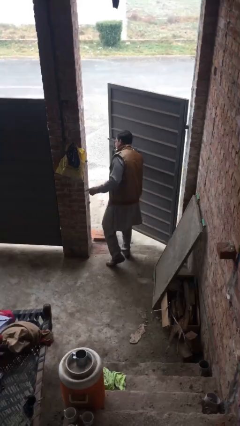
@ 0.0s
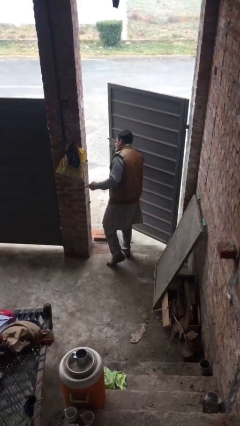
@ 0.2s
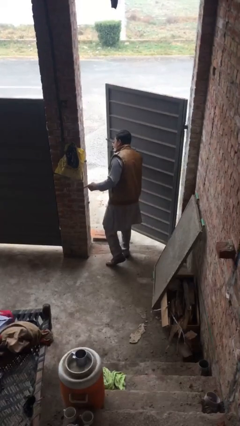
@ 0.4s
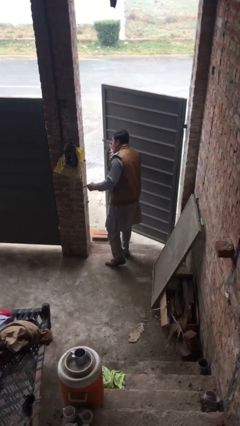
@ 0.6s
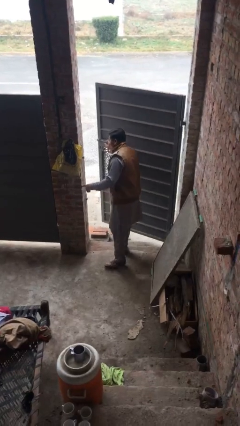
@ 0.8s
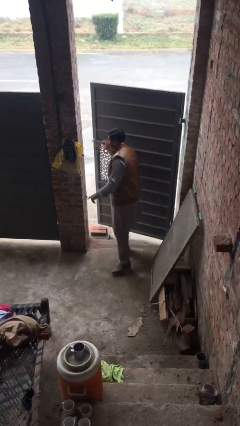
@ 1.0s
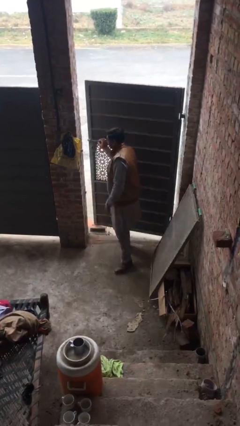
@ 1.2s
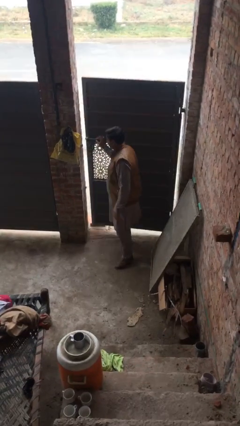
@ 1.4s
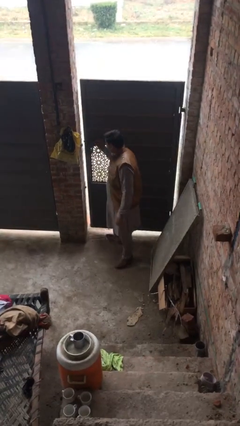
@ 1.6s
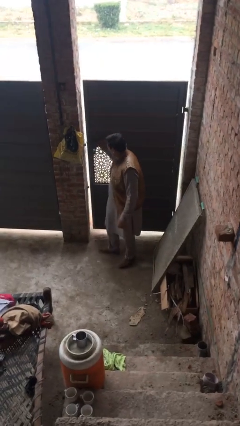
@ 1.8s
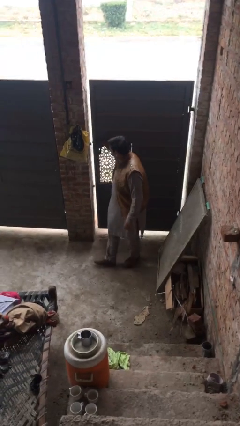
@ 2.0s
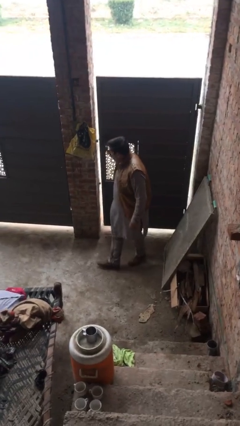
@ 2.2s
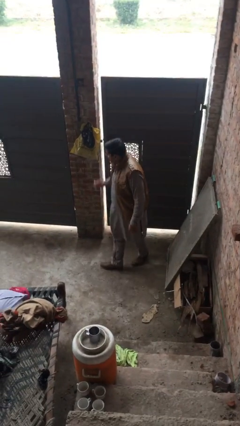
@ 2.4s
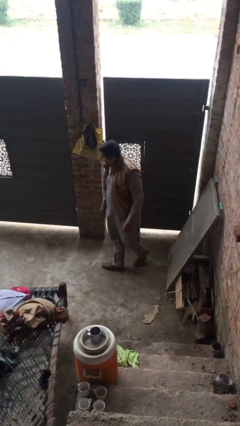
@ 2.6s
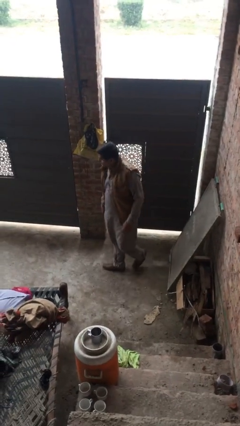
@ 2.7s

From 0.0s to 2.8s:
person closes facility door

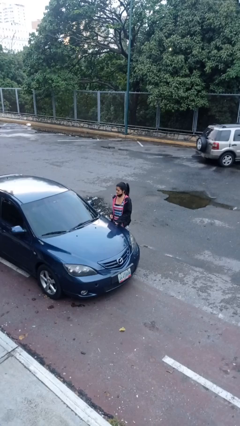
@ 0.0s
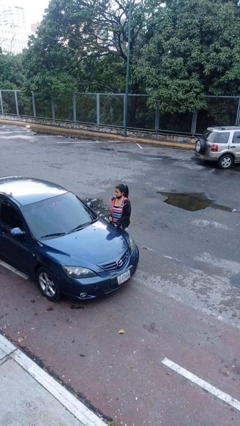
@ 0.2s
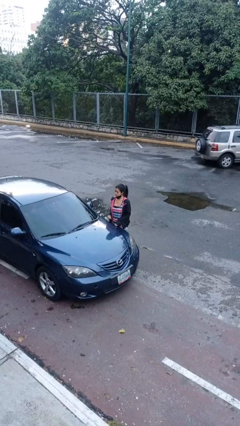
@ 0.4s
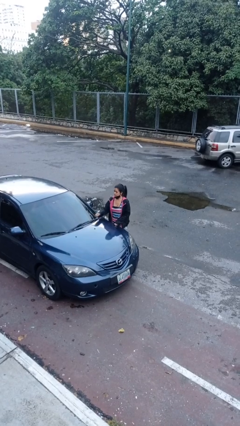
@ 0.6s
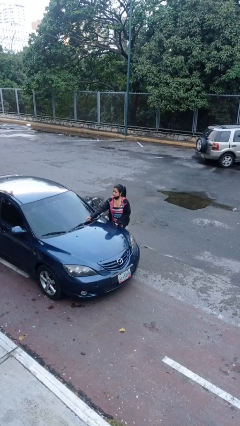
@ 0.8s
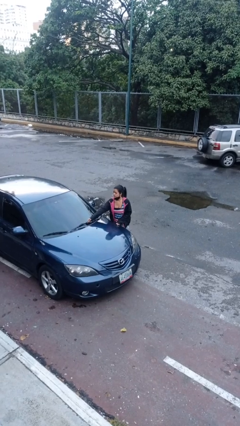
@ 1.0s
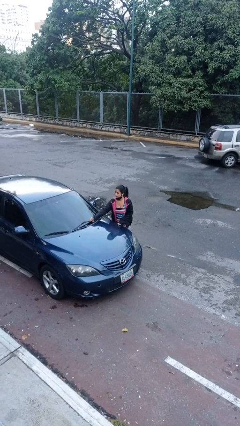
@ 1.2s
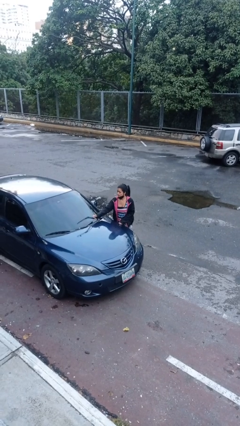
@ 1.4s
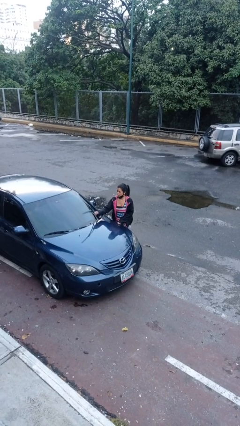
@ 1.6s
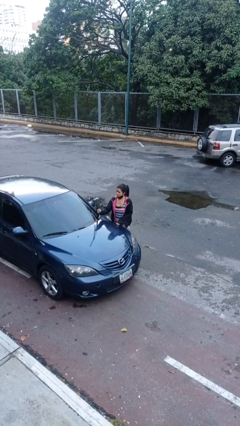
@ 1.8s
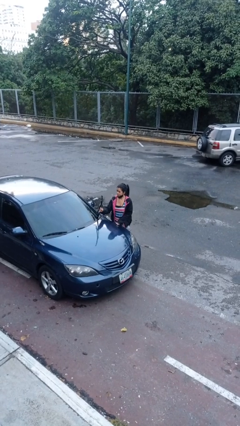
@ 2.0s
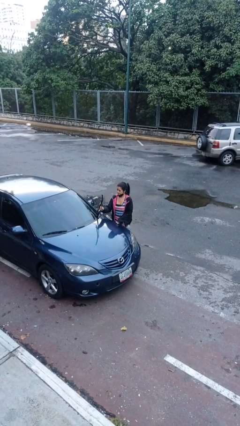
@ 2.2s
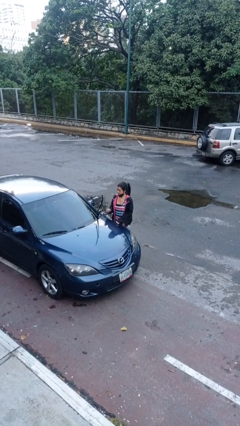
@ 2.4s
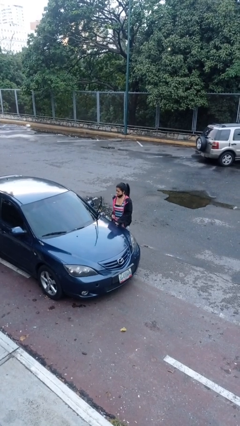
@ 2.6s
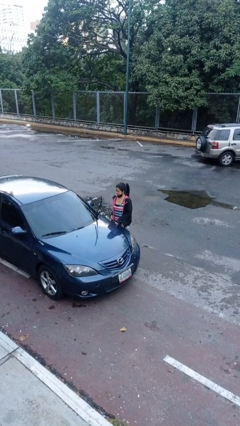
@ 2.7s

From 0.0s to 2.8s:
person flips up car wipers

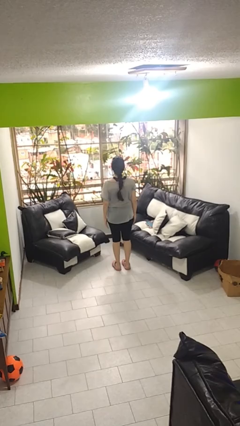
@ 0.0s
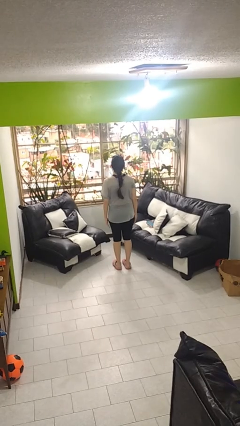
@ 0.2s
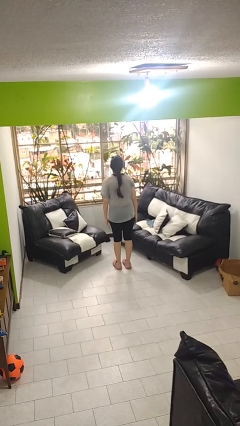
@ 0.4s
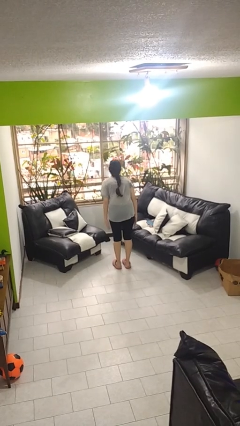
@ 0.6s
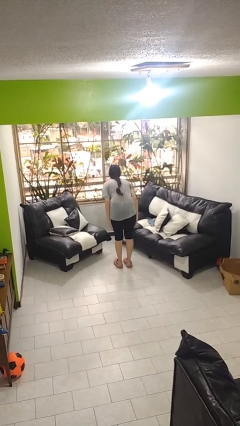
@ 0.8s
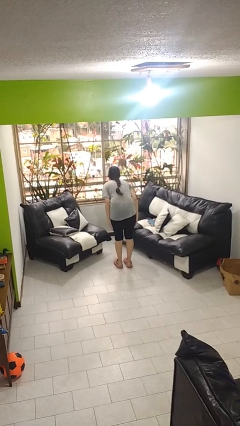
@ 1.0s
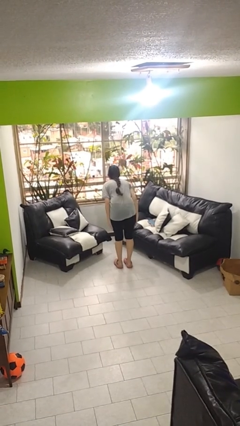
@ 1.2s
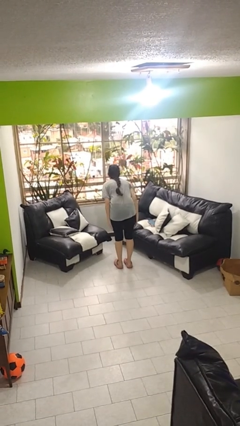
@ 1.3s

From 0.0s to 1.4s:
person bows

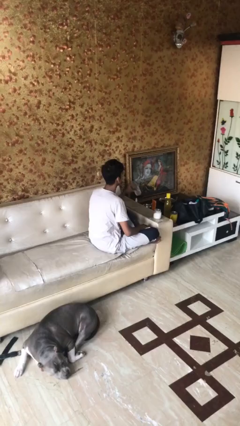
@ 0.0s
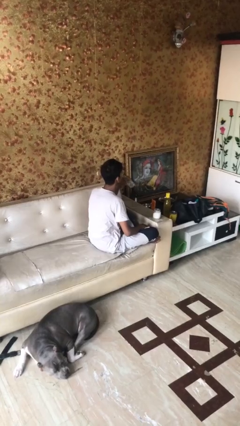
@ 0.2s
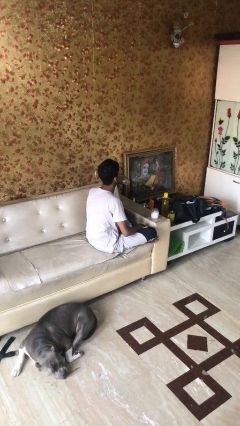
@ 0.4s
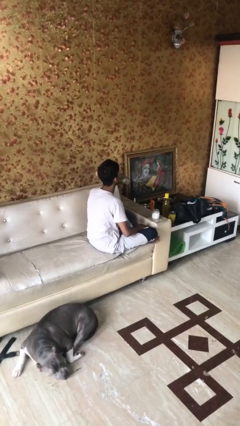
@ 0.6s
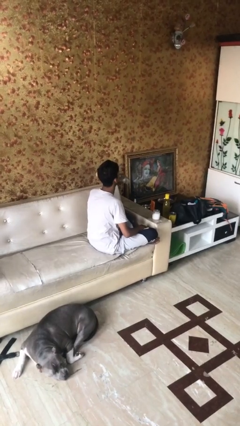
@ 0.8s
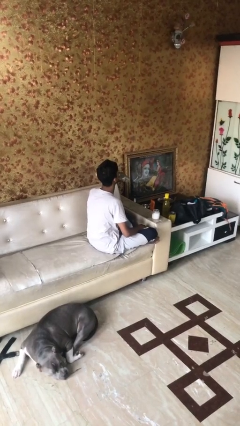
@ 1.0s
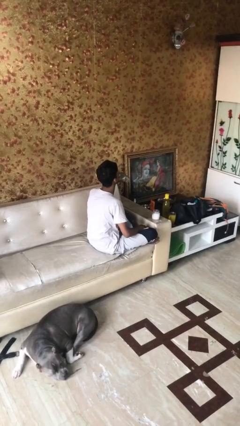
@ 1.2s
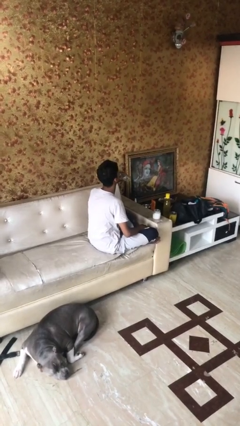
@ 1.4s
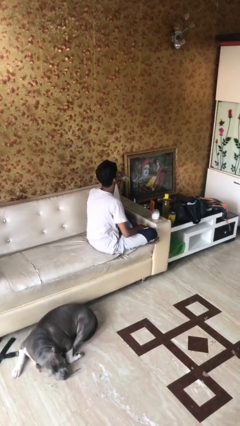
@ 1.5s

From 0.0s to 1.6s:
person drinks from cup

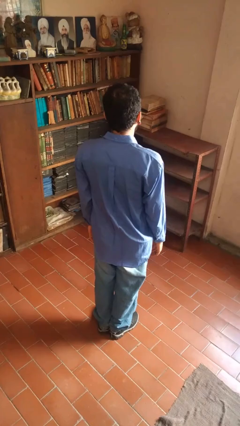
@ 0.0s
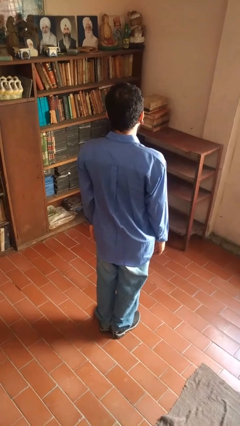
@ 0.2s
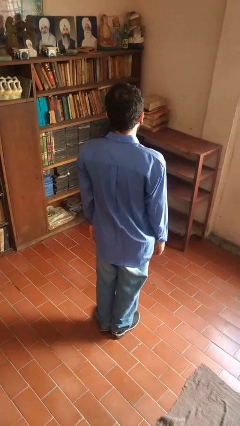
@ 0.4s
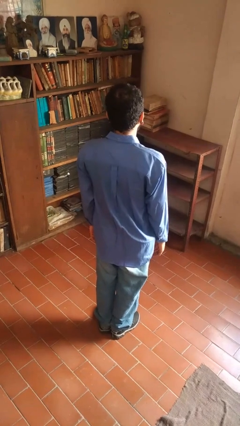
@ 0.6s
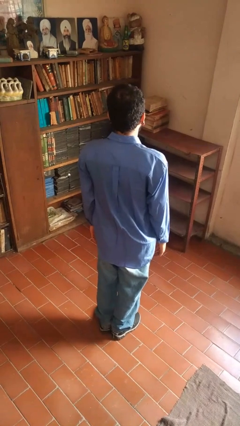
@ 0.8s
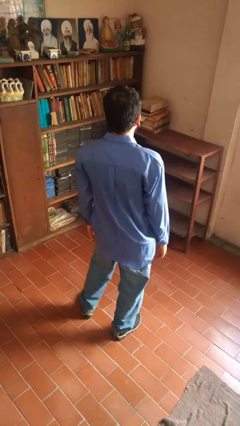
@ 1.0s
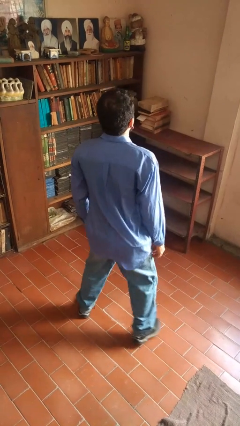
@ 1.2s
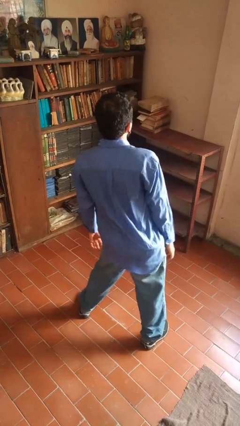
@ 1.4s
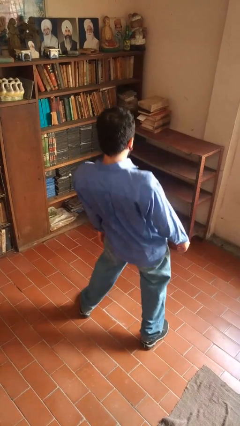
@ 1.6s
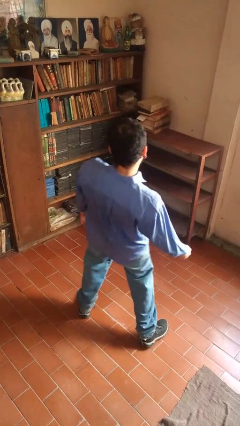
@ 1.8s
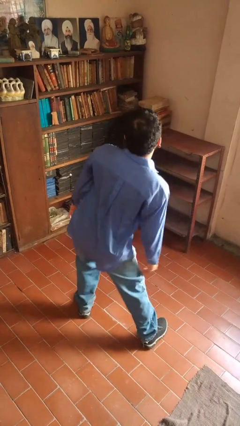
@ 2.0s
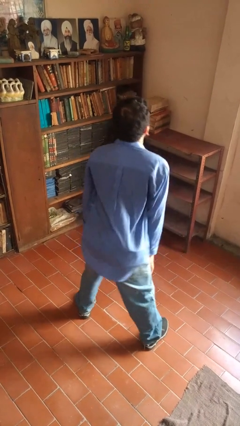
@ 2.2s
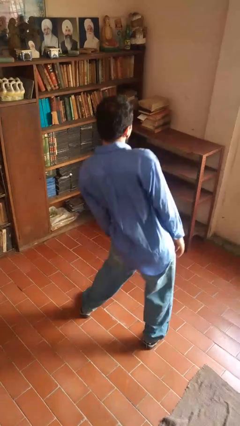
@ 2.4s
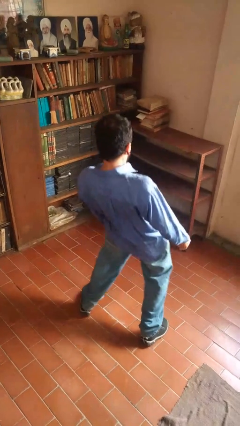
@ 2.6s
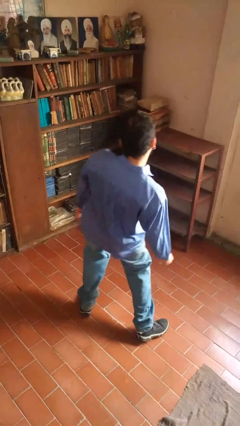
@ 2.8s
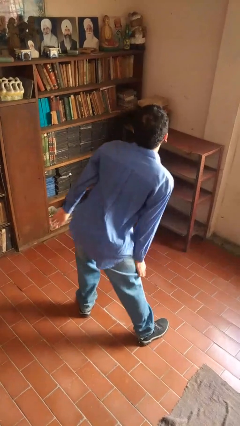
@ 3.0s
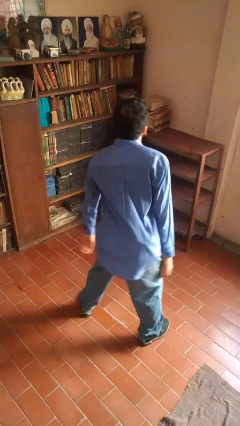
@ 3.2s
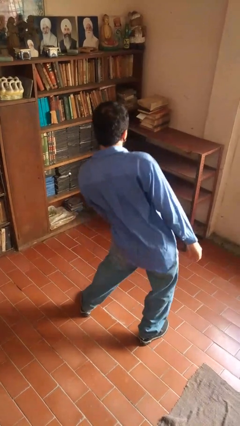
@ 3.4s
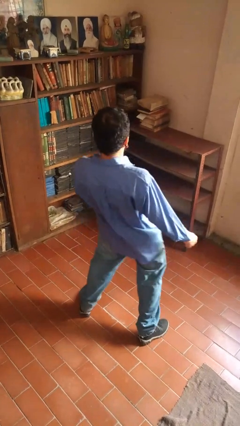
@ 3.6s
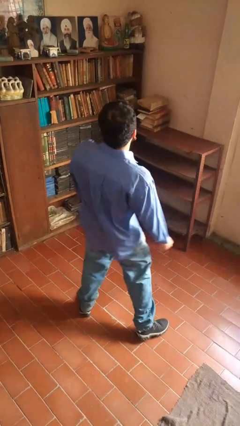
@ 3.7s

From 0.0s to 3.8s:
person wiggles hips

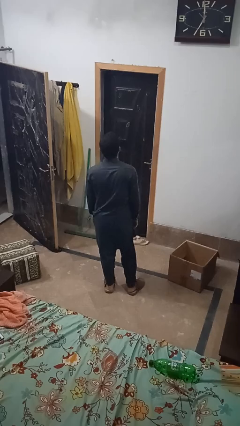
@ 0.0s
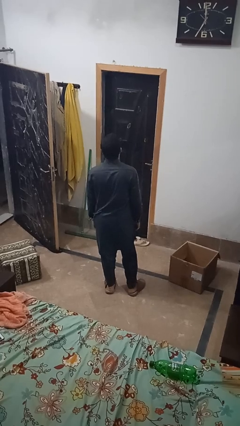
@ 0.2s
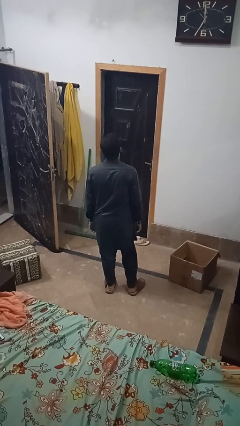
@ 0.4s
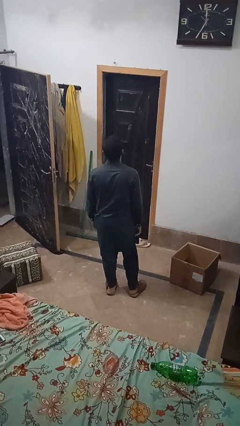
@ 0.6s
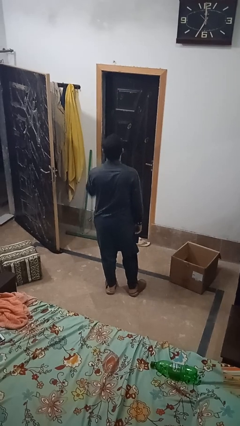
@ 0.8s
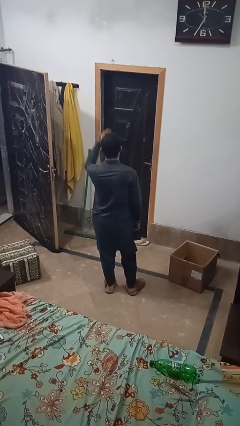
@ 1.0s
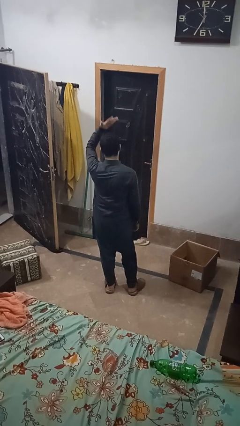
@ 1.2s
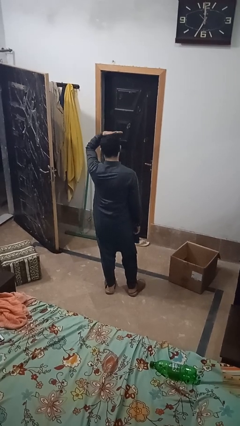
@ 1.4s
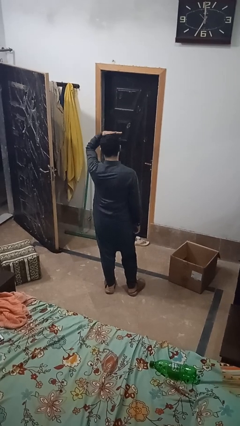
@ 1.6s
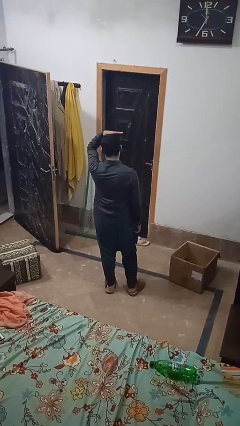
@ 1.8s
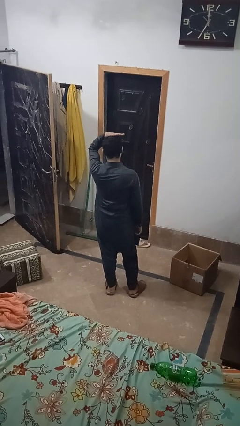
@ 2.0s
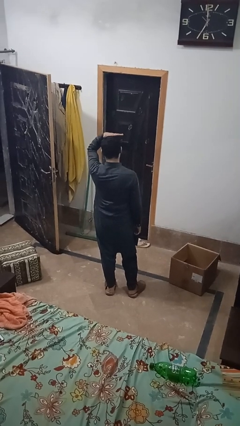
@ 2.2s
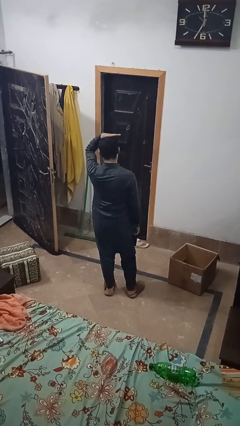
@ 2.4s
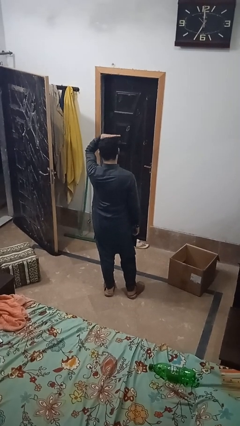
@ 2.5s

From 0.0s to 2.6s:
person pats head

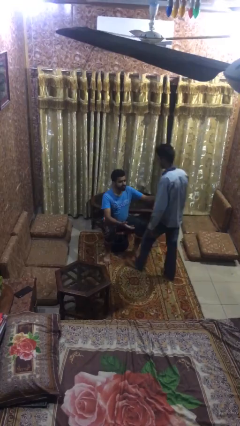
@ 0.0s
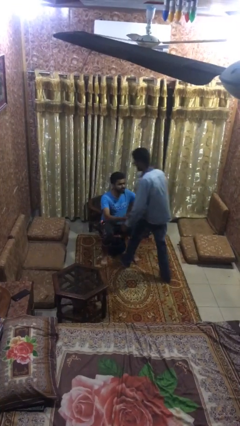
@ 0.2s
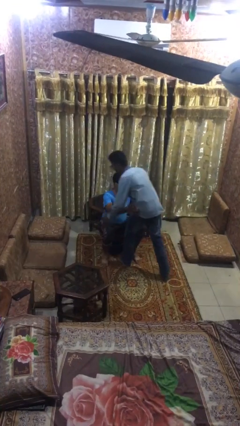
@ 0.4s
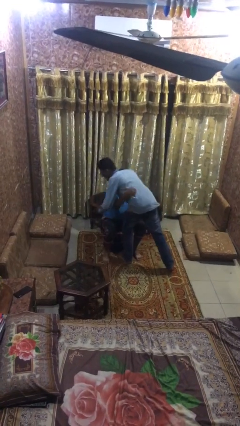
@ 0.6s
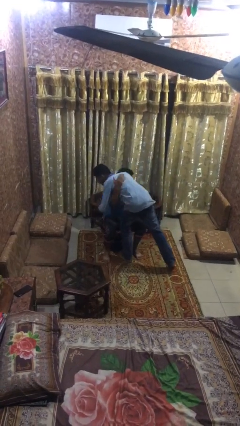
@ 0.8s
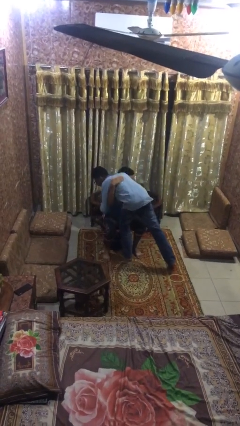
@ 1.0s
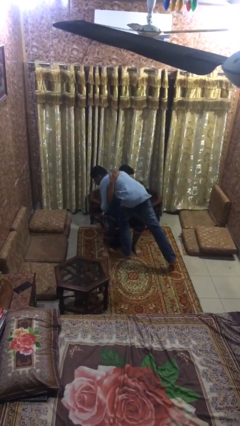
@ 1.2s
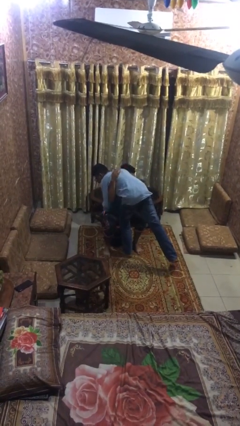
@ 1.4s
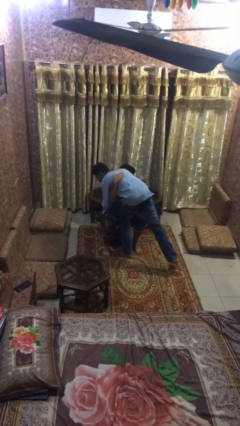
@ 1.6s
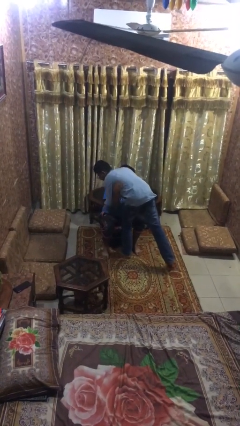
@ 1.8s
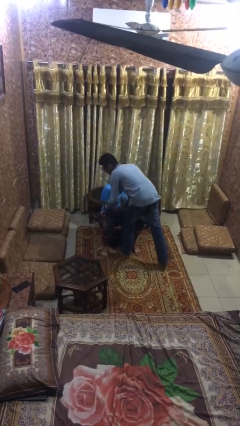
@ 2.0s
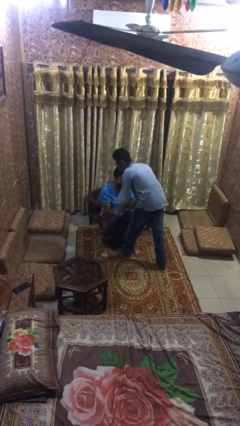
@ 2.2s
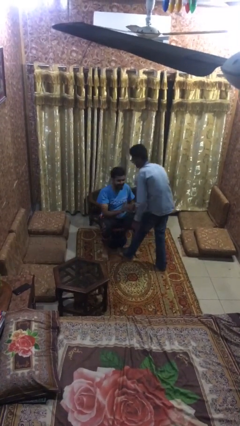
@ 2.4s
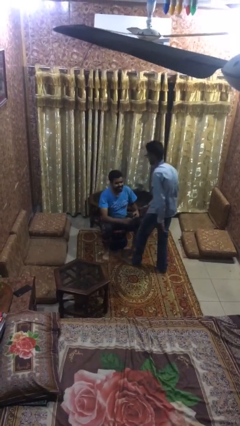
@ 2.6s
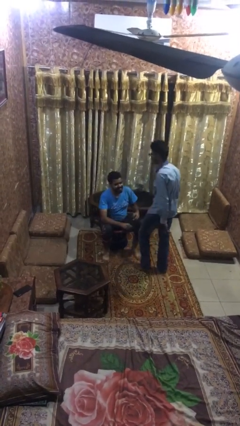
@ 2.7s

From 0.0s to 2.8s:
person embraces person
